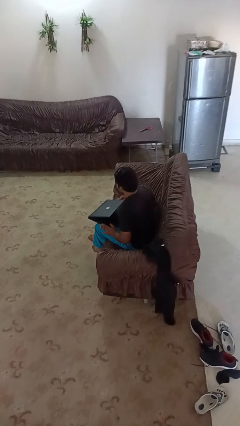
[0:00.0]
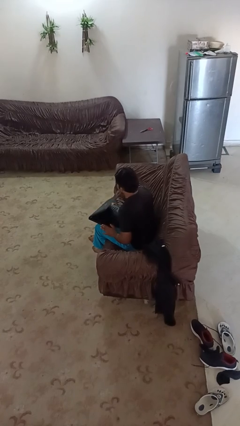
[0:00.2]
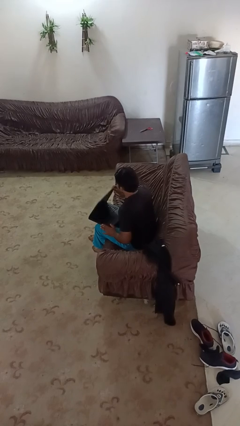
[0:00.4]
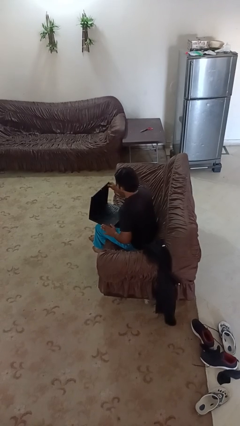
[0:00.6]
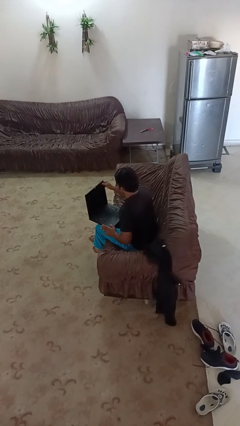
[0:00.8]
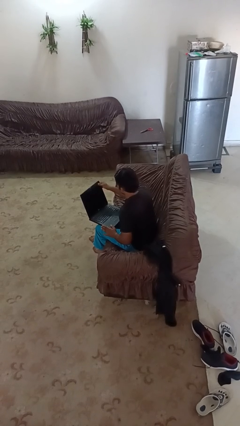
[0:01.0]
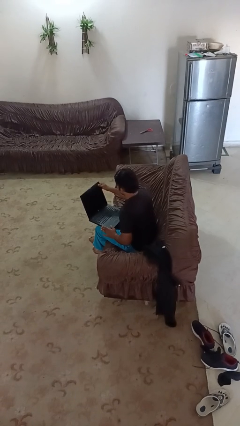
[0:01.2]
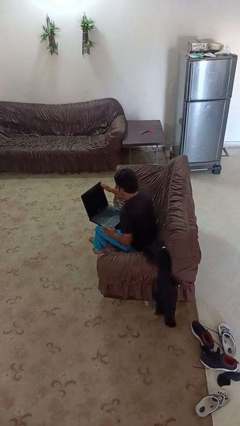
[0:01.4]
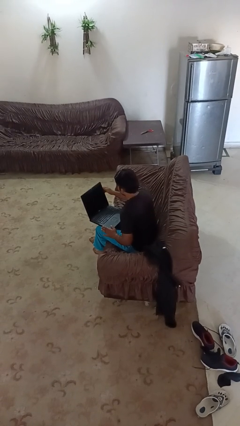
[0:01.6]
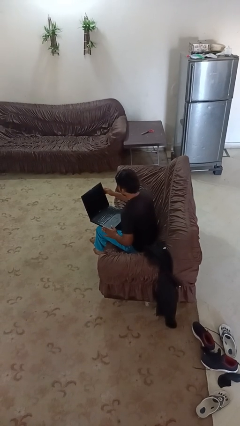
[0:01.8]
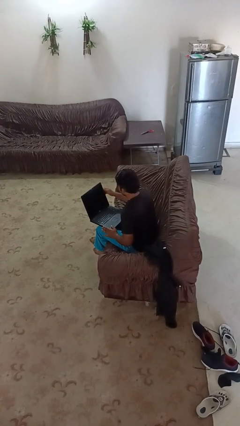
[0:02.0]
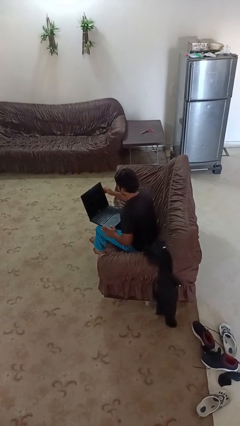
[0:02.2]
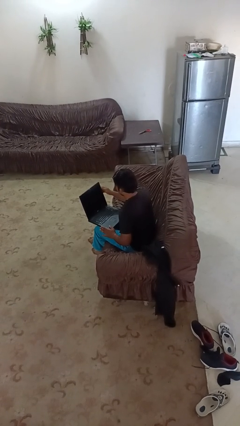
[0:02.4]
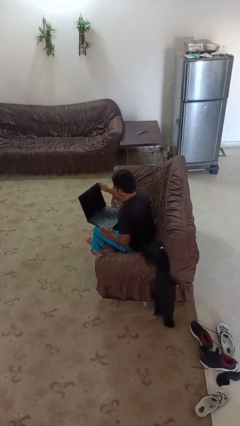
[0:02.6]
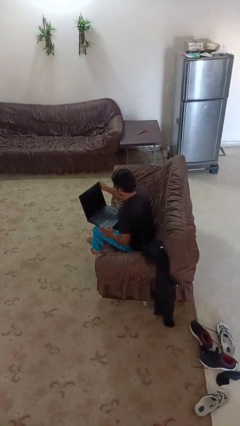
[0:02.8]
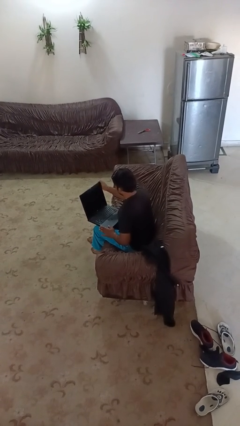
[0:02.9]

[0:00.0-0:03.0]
person opens laptop

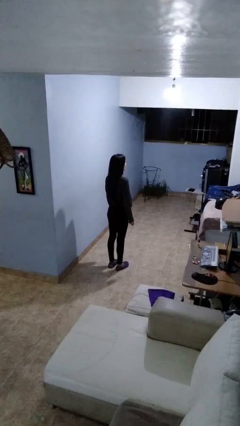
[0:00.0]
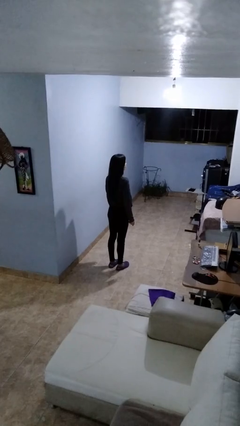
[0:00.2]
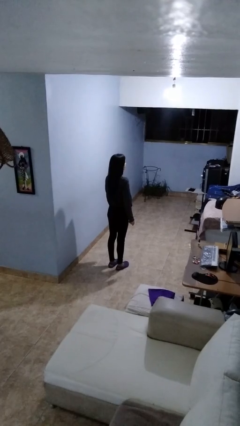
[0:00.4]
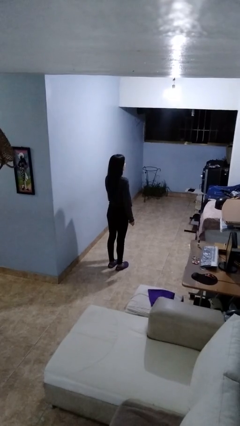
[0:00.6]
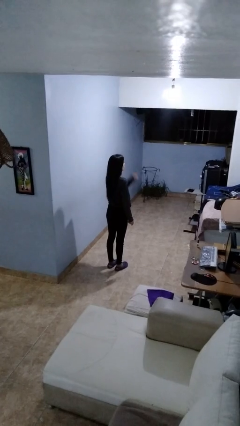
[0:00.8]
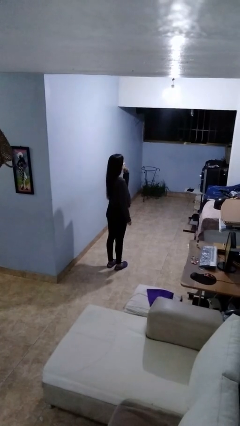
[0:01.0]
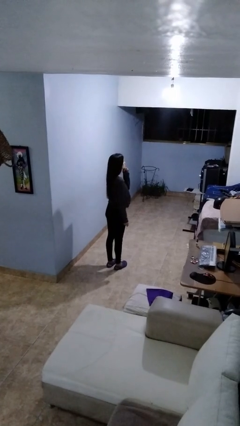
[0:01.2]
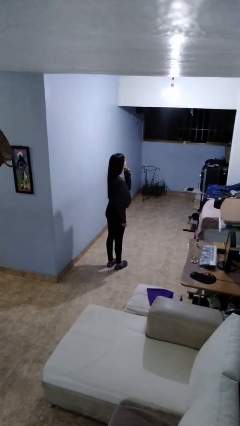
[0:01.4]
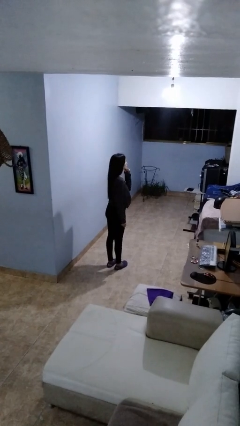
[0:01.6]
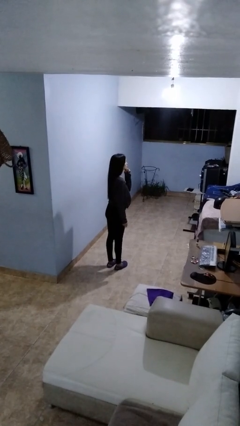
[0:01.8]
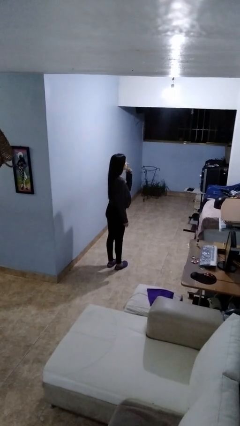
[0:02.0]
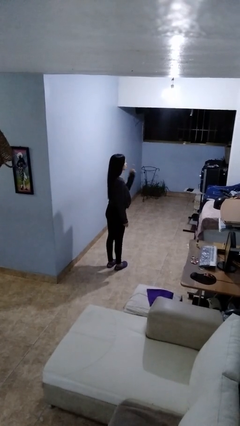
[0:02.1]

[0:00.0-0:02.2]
person gestures be quiet

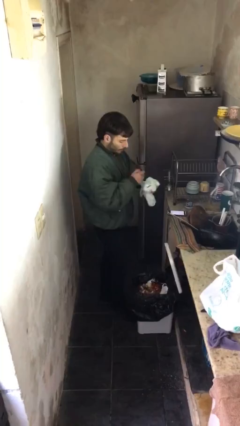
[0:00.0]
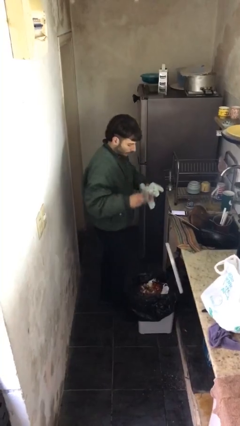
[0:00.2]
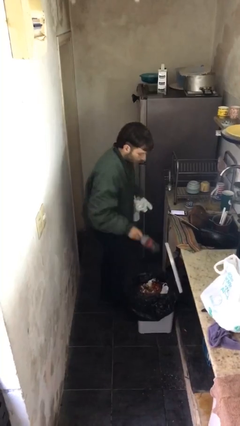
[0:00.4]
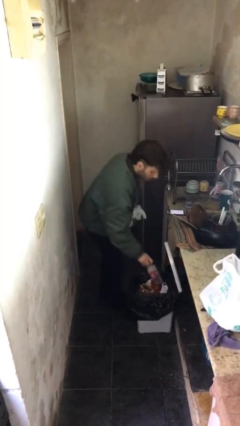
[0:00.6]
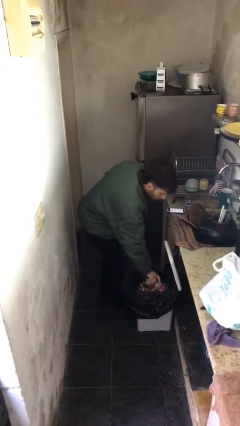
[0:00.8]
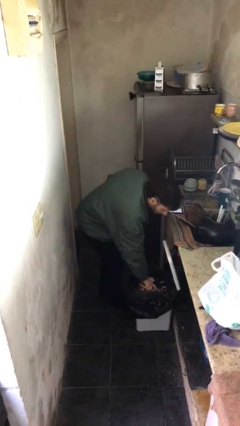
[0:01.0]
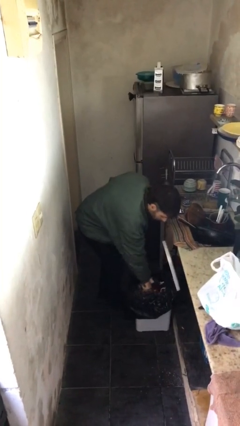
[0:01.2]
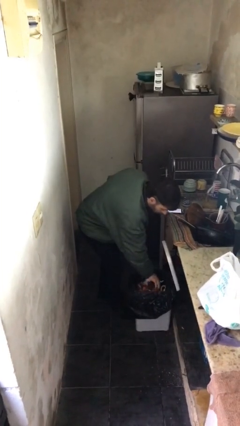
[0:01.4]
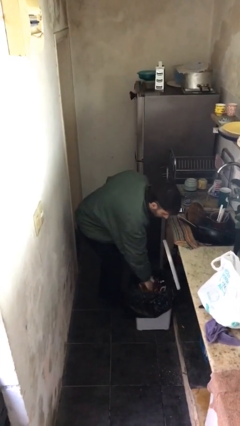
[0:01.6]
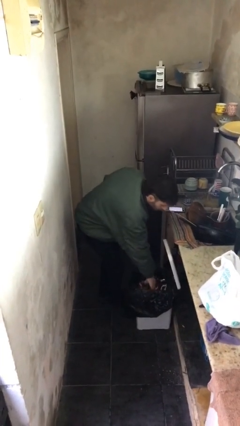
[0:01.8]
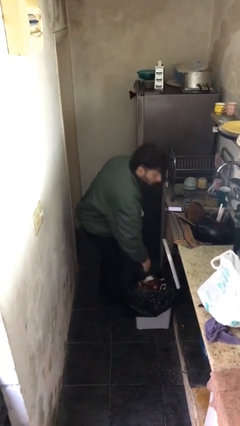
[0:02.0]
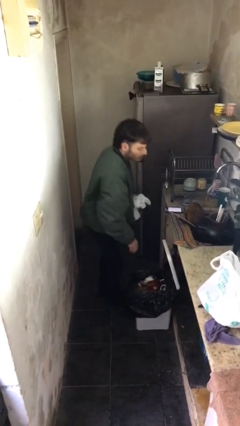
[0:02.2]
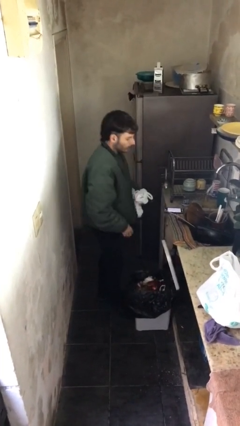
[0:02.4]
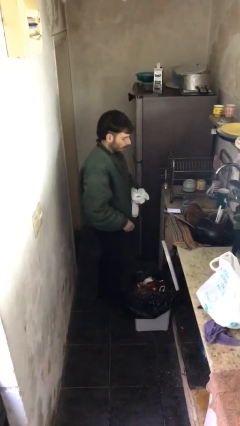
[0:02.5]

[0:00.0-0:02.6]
person discards trash

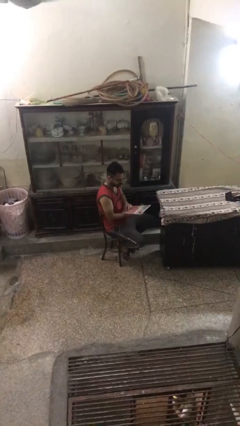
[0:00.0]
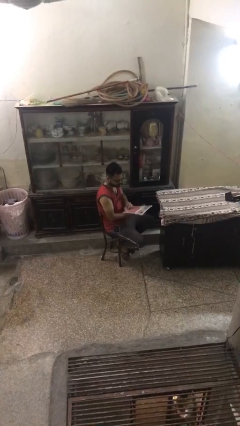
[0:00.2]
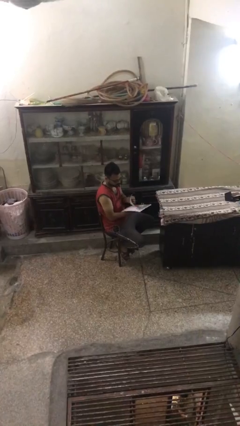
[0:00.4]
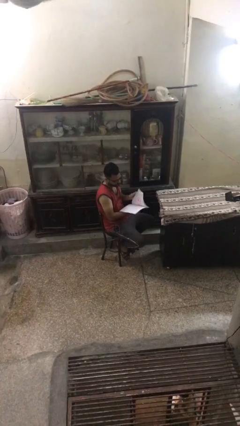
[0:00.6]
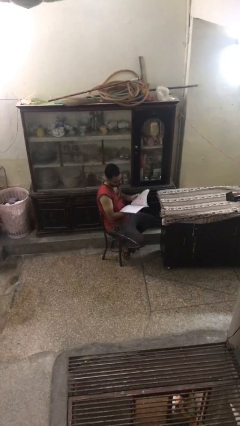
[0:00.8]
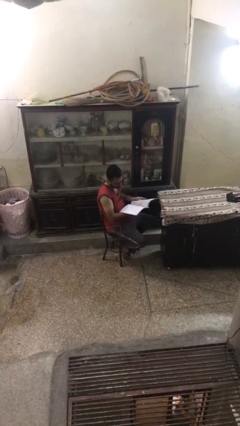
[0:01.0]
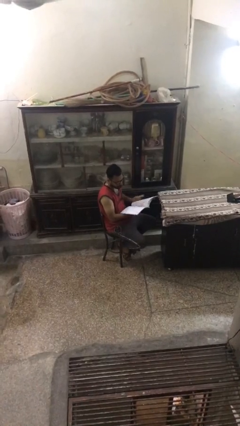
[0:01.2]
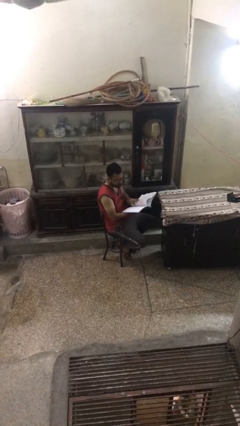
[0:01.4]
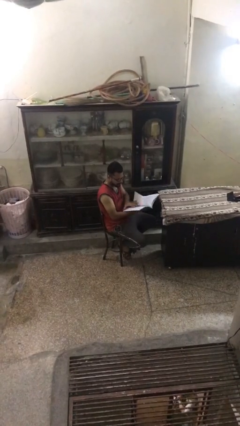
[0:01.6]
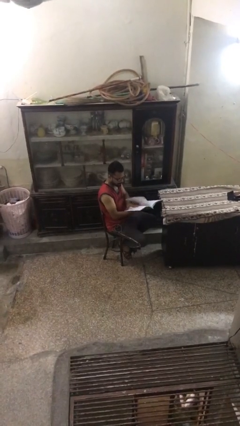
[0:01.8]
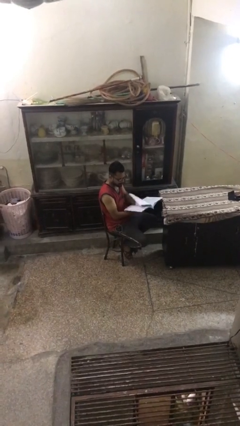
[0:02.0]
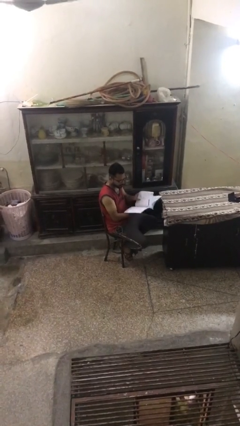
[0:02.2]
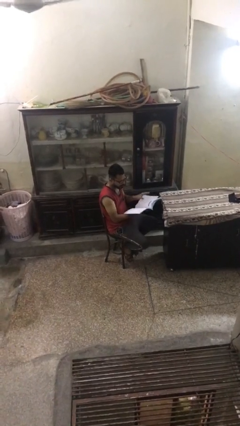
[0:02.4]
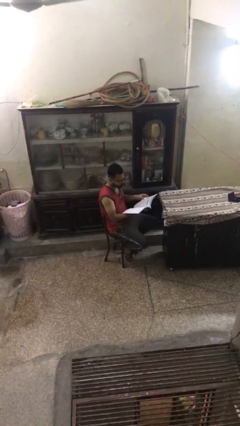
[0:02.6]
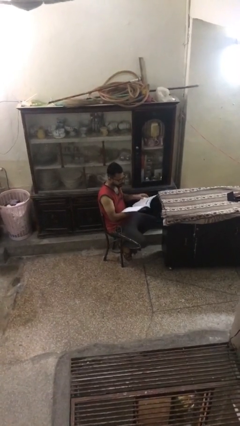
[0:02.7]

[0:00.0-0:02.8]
person reads document

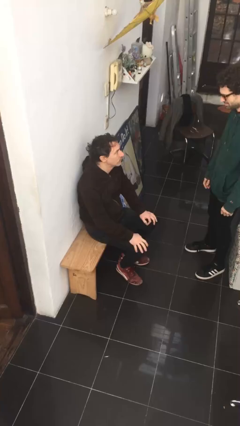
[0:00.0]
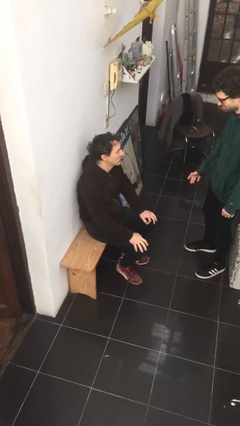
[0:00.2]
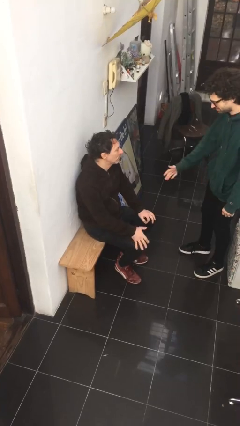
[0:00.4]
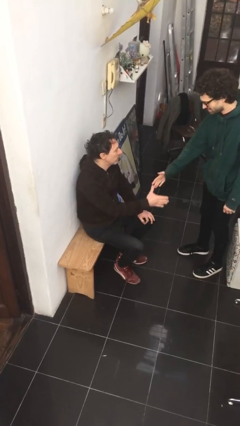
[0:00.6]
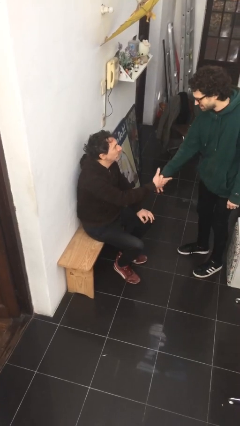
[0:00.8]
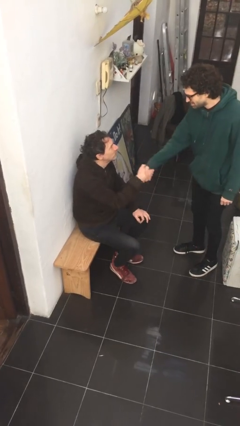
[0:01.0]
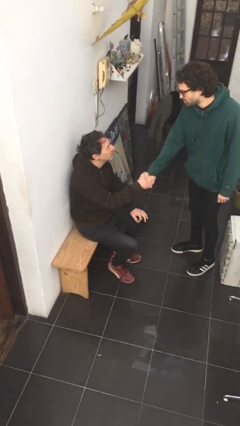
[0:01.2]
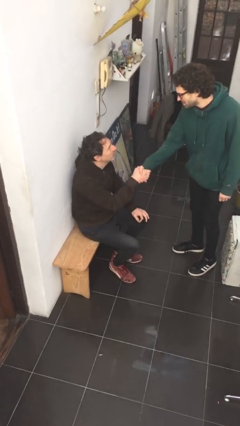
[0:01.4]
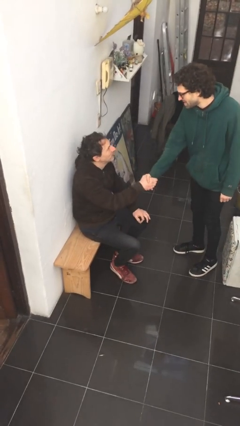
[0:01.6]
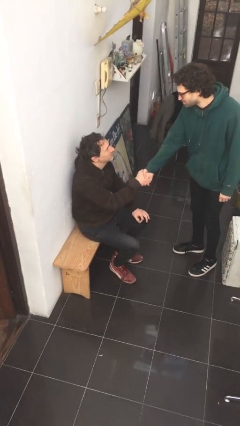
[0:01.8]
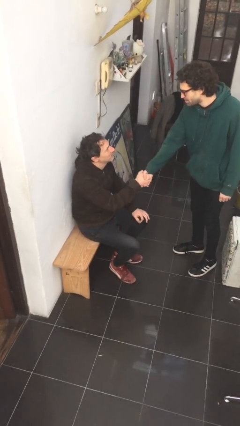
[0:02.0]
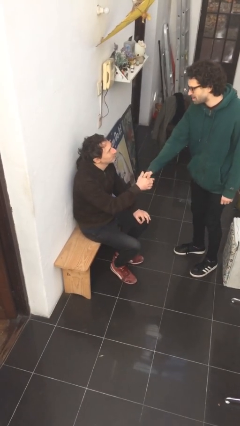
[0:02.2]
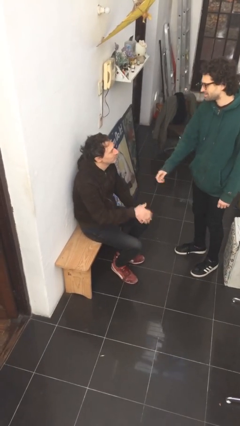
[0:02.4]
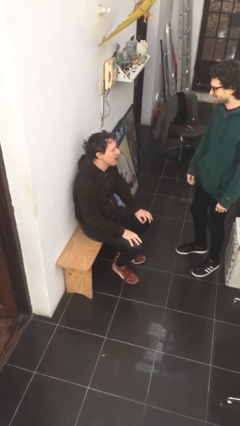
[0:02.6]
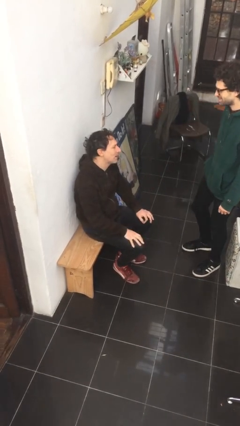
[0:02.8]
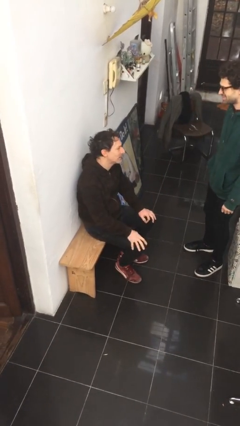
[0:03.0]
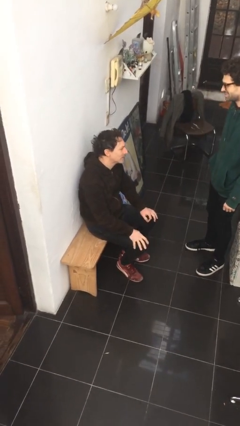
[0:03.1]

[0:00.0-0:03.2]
person shakes hand

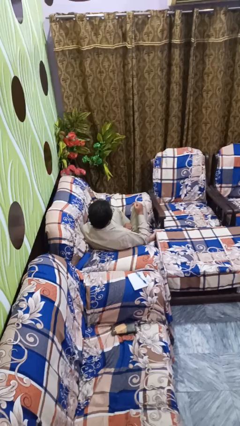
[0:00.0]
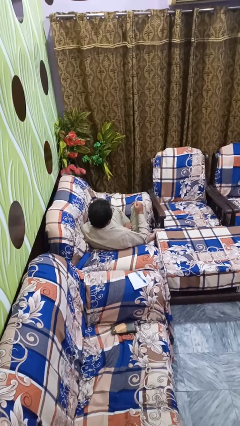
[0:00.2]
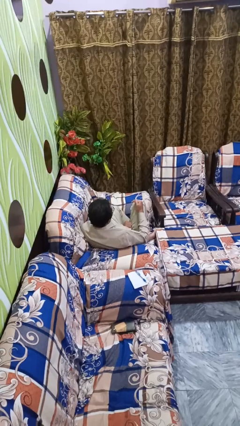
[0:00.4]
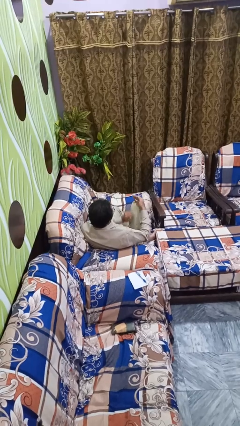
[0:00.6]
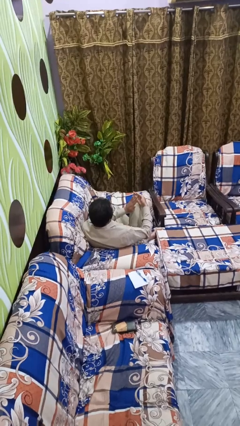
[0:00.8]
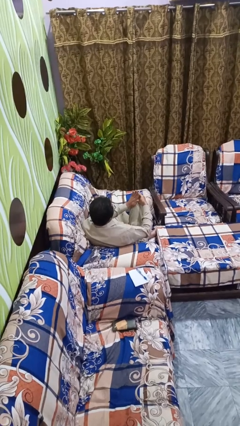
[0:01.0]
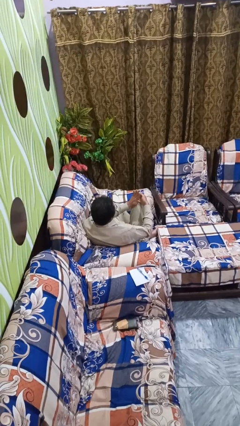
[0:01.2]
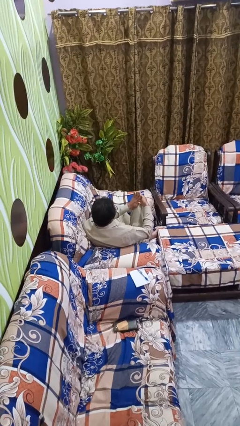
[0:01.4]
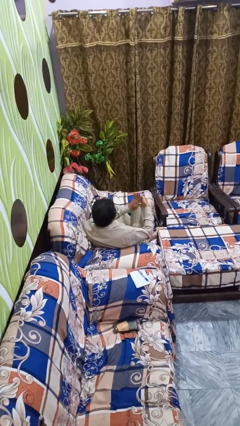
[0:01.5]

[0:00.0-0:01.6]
person gestures number five

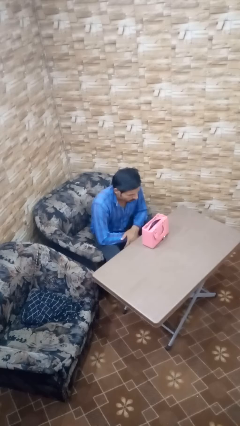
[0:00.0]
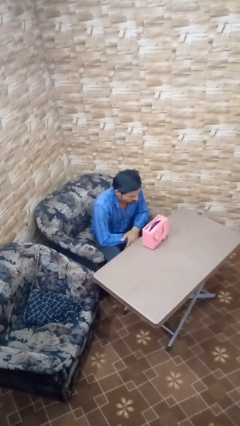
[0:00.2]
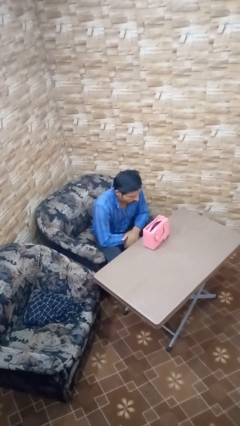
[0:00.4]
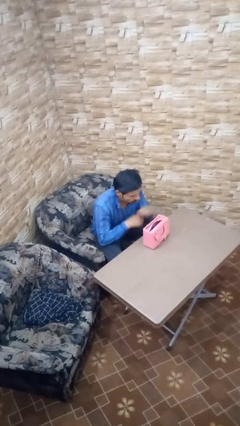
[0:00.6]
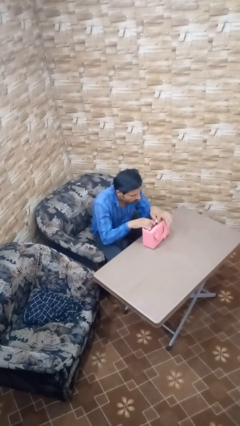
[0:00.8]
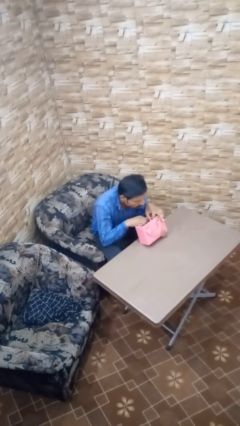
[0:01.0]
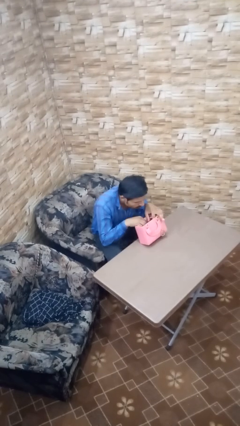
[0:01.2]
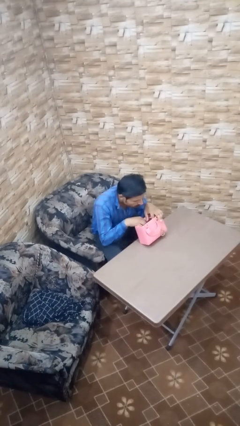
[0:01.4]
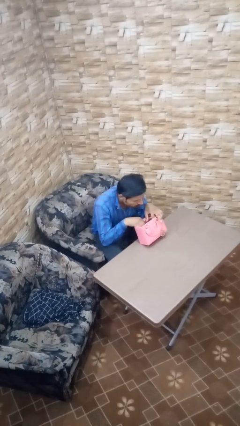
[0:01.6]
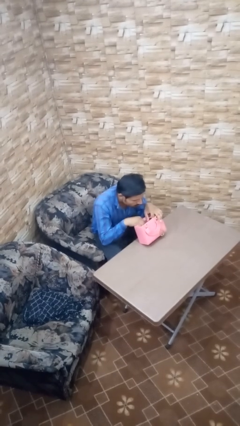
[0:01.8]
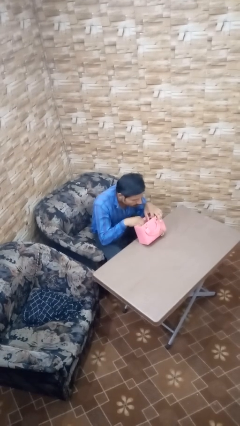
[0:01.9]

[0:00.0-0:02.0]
person searches in purse
